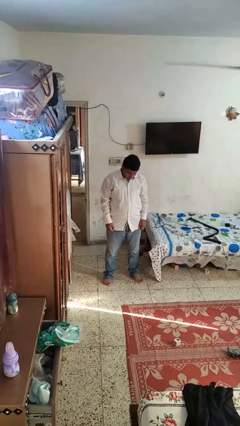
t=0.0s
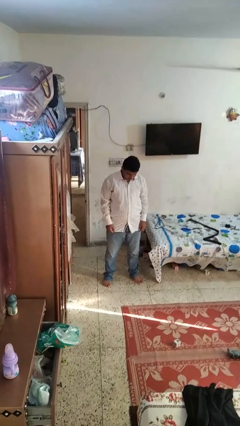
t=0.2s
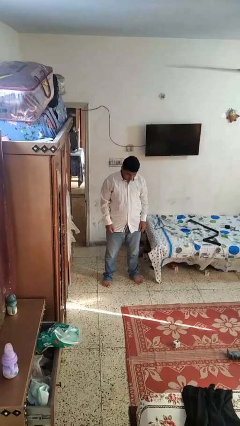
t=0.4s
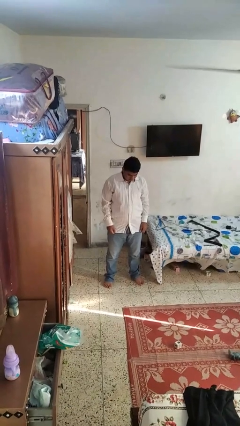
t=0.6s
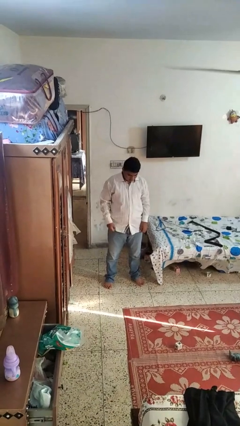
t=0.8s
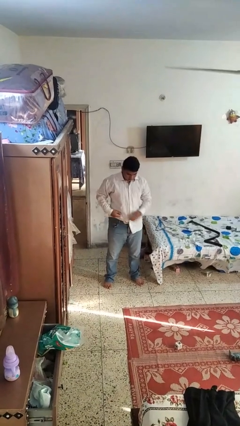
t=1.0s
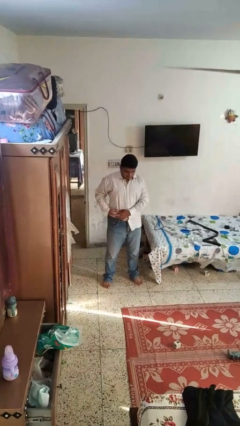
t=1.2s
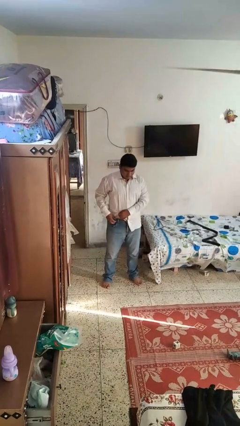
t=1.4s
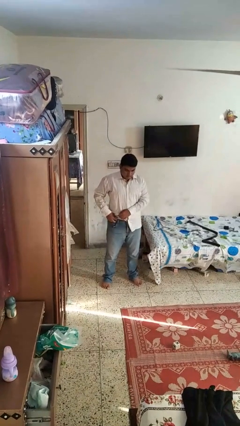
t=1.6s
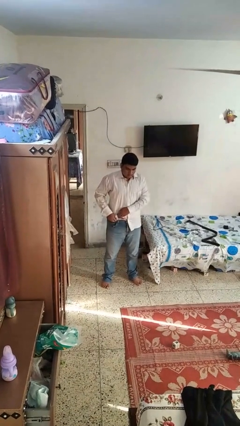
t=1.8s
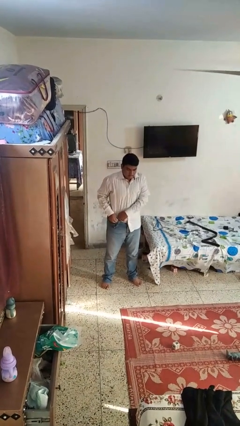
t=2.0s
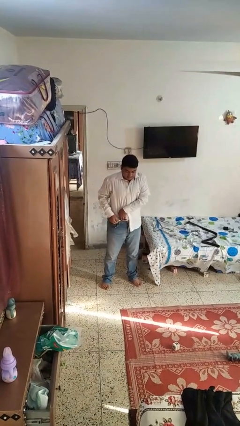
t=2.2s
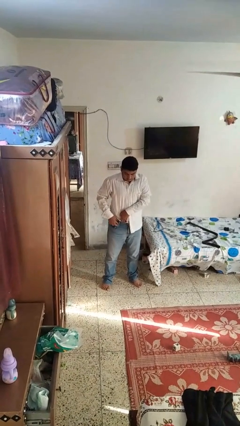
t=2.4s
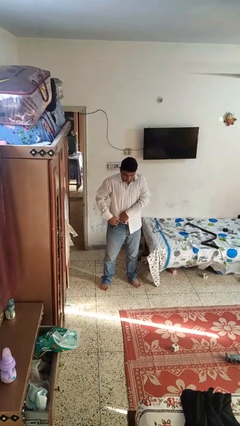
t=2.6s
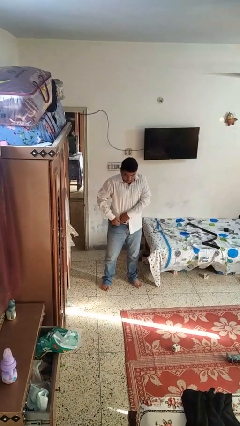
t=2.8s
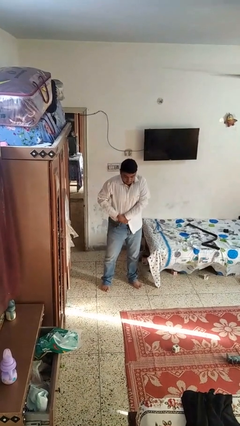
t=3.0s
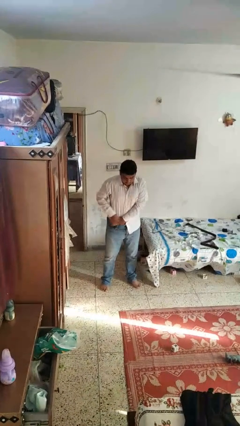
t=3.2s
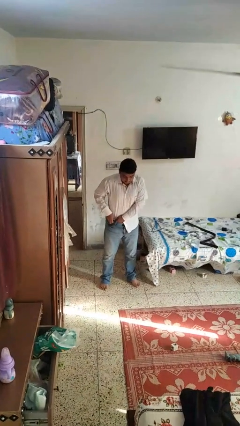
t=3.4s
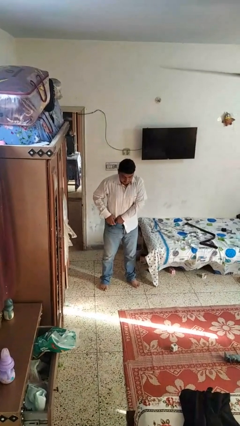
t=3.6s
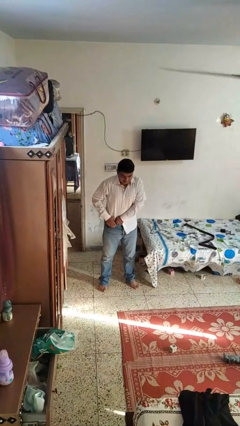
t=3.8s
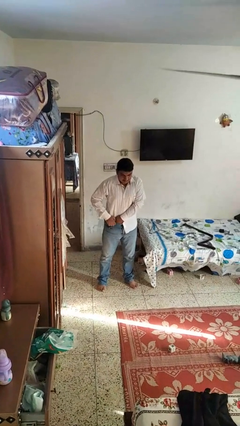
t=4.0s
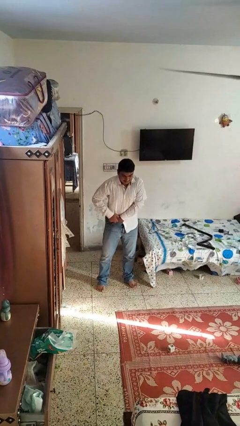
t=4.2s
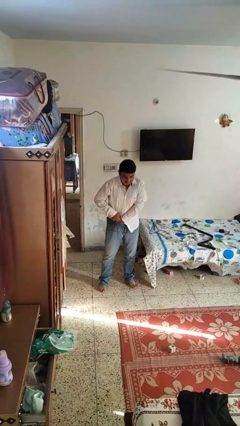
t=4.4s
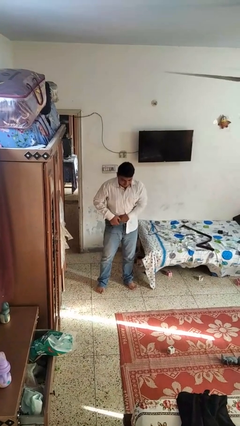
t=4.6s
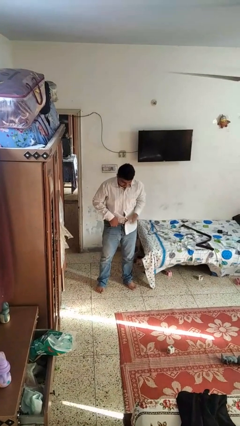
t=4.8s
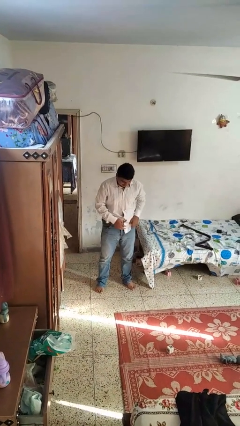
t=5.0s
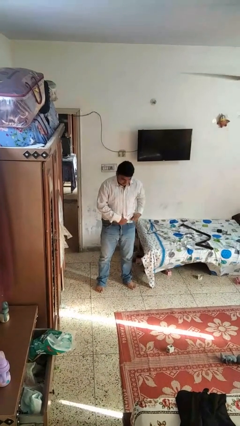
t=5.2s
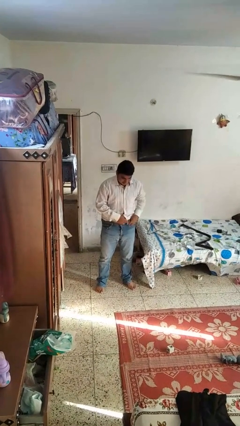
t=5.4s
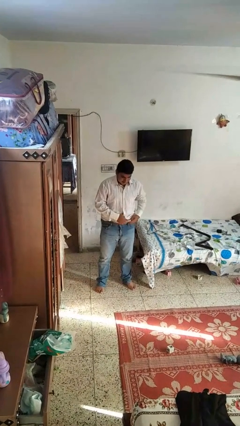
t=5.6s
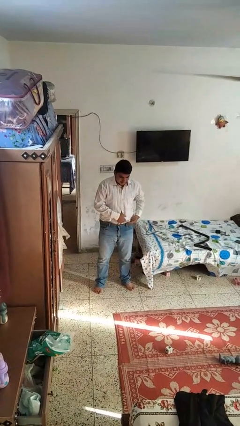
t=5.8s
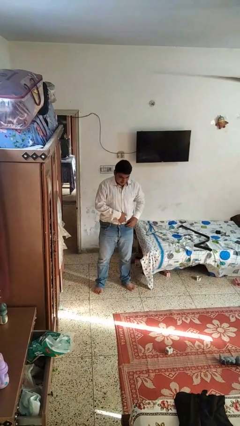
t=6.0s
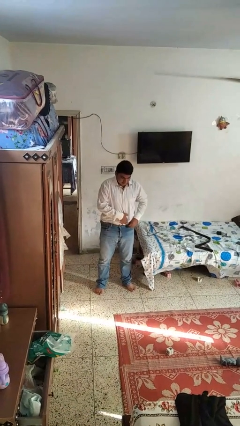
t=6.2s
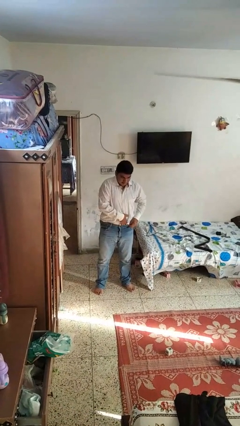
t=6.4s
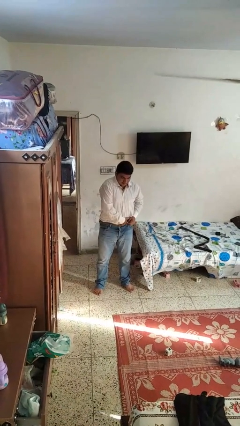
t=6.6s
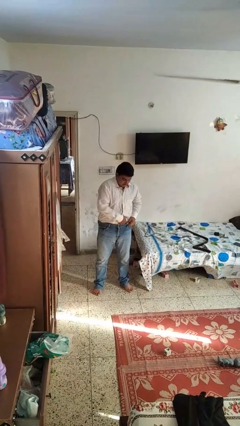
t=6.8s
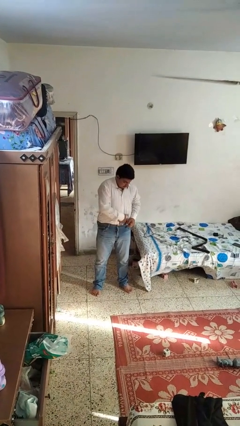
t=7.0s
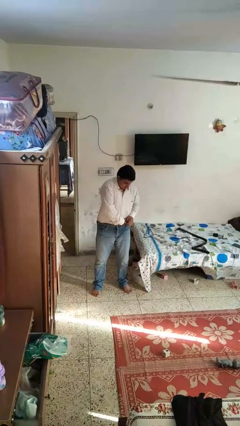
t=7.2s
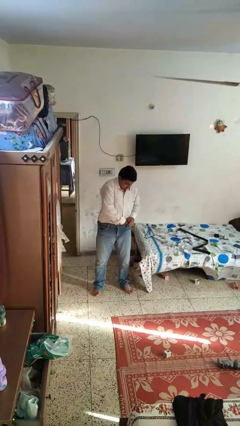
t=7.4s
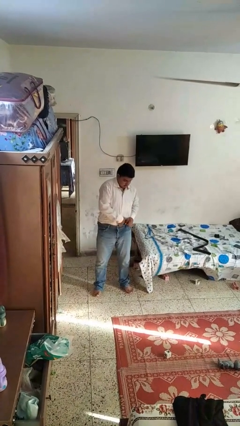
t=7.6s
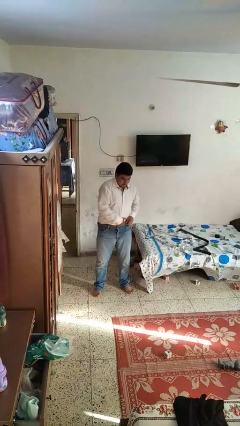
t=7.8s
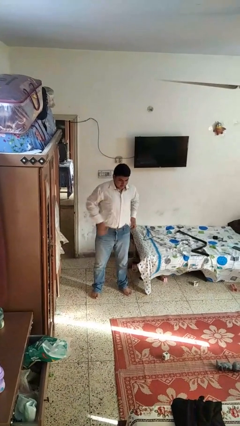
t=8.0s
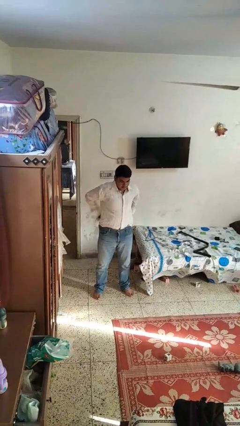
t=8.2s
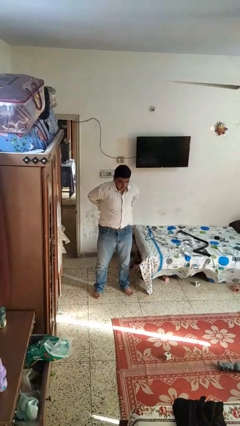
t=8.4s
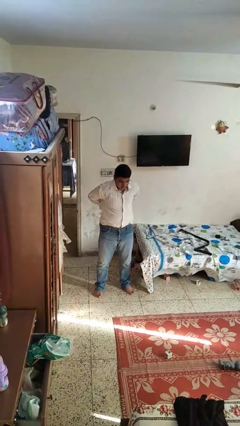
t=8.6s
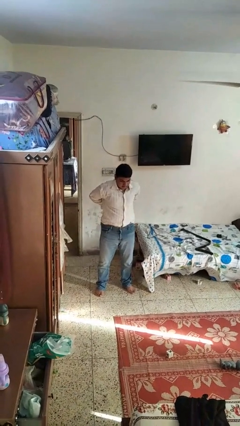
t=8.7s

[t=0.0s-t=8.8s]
person tucks in shirt

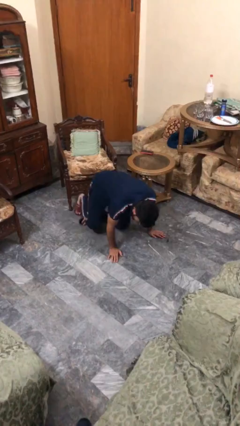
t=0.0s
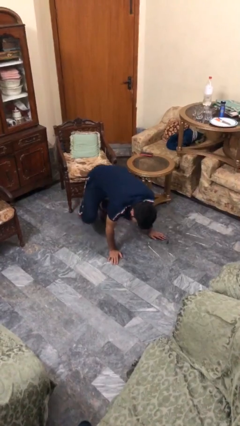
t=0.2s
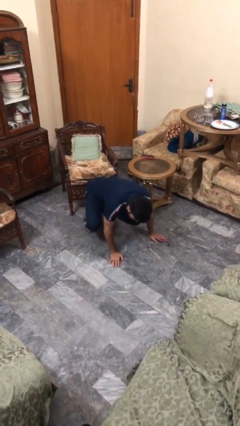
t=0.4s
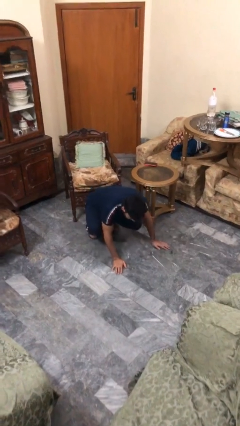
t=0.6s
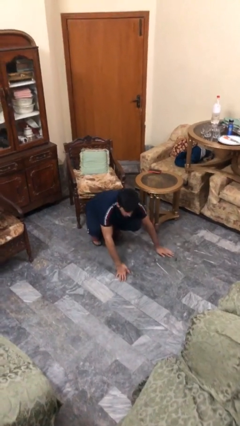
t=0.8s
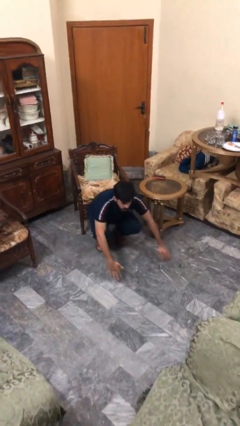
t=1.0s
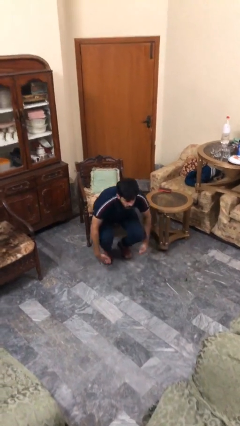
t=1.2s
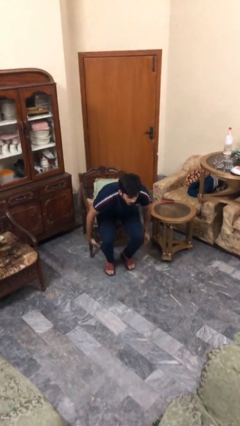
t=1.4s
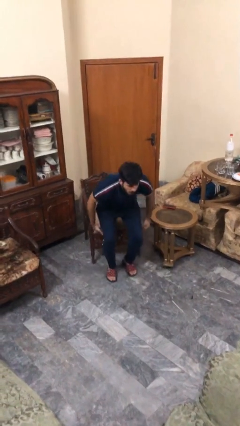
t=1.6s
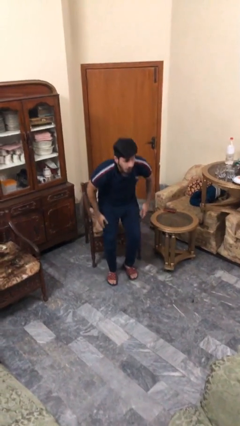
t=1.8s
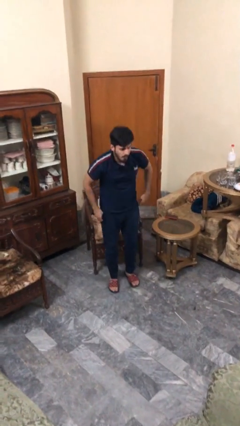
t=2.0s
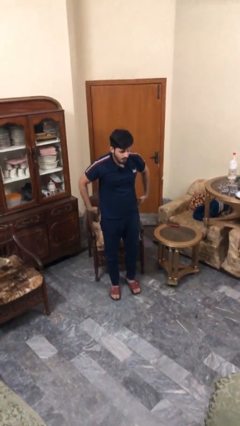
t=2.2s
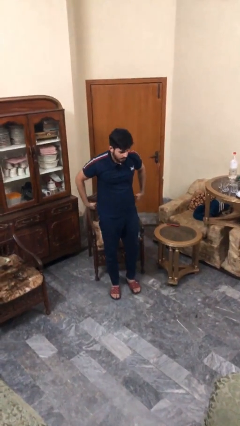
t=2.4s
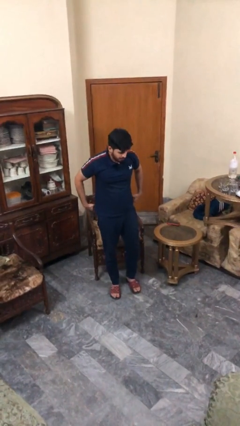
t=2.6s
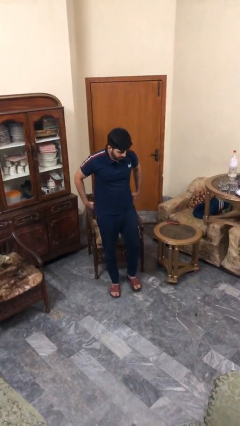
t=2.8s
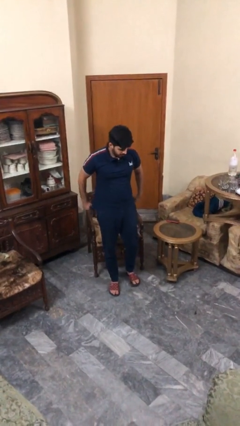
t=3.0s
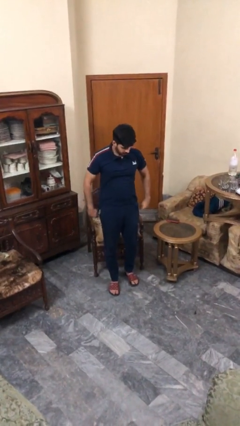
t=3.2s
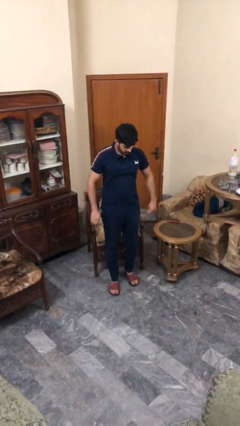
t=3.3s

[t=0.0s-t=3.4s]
person stands up from floor

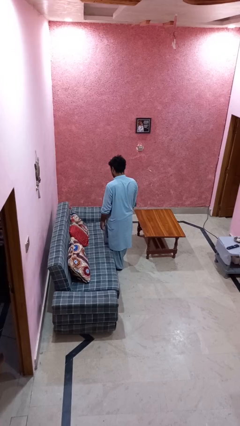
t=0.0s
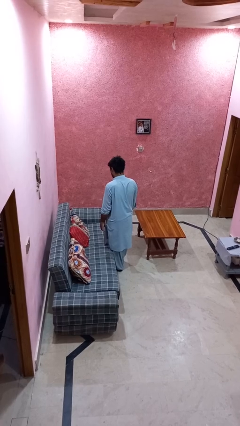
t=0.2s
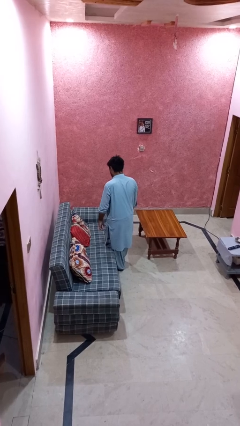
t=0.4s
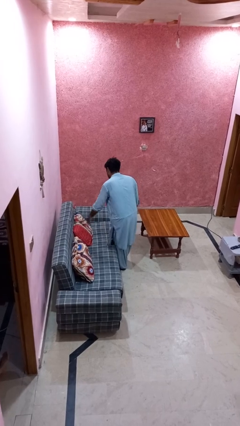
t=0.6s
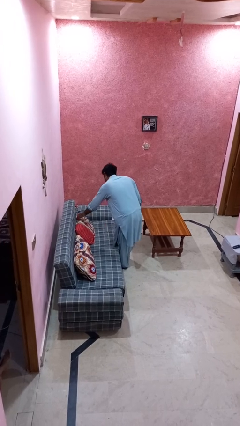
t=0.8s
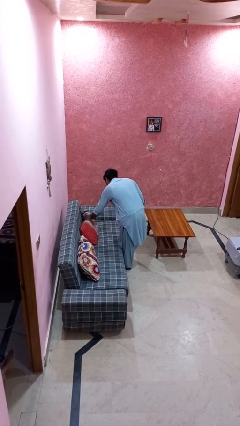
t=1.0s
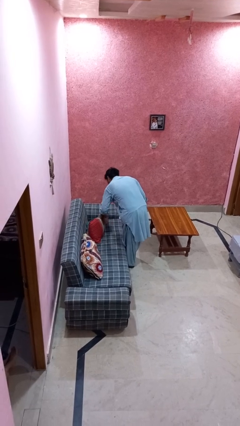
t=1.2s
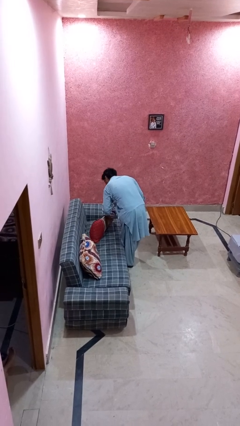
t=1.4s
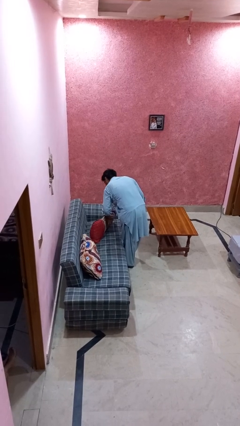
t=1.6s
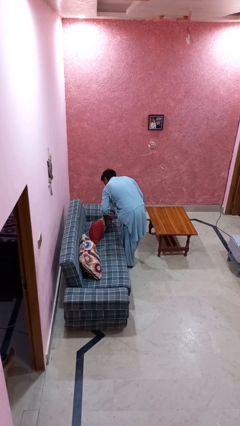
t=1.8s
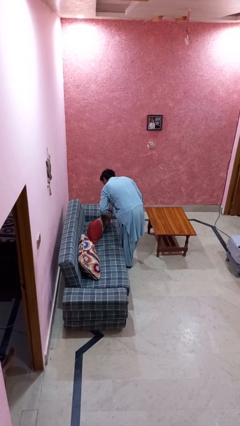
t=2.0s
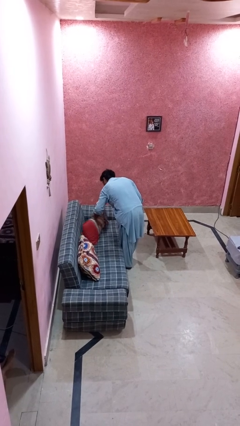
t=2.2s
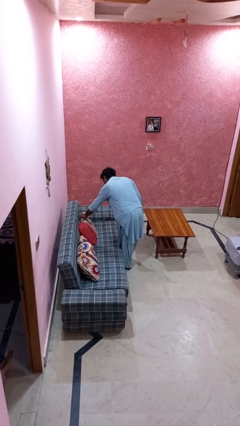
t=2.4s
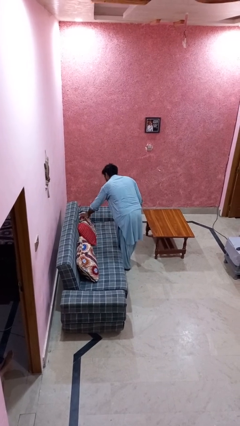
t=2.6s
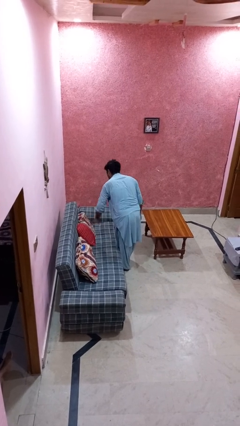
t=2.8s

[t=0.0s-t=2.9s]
person searches in couch

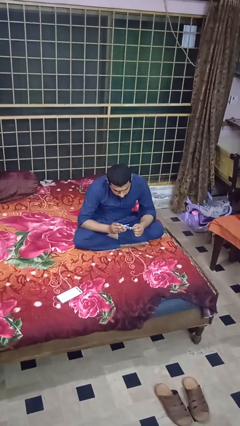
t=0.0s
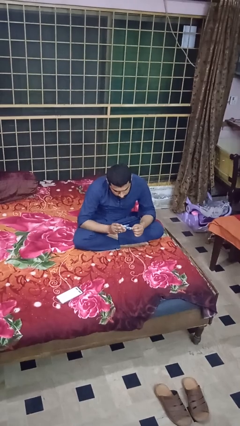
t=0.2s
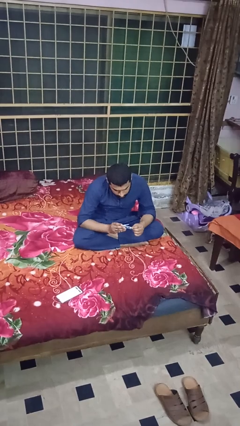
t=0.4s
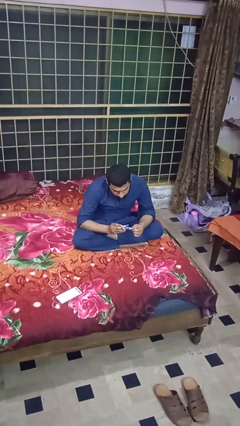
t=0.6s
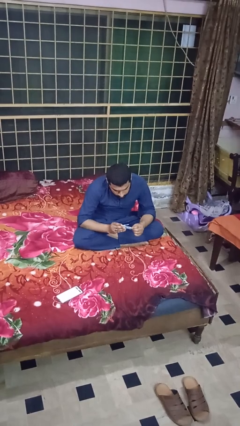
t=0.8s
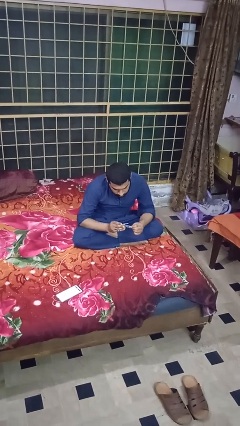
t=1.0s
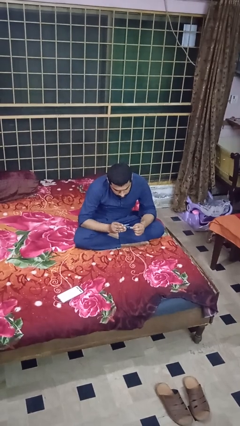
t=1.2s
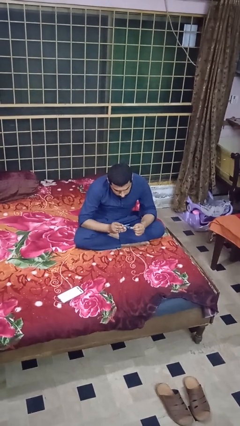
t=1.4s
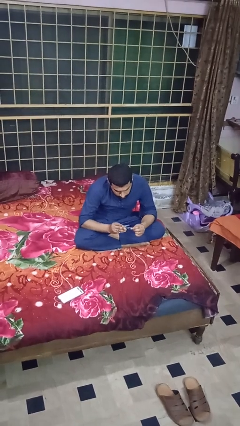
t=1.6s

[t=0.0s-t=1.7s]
person clips fingernails

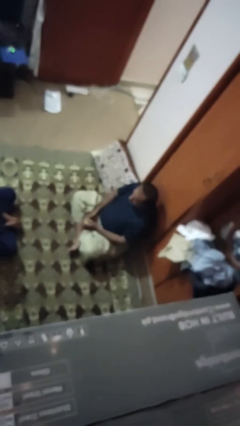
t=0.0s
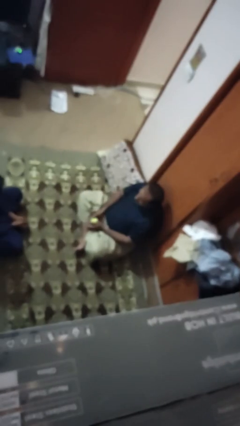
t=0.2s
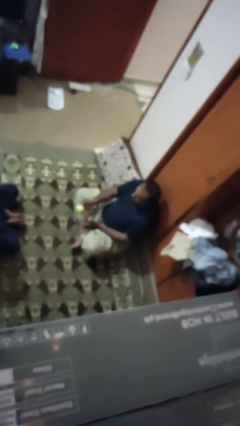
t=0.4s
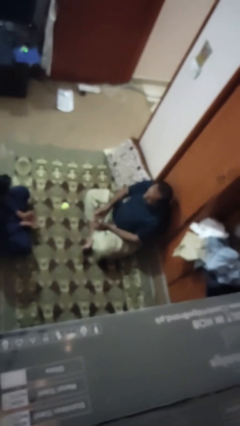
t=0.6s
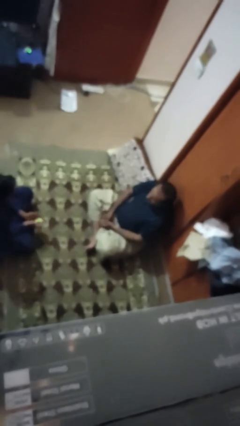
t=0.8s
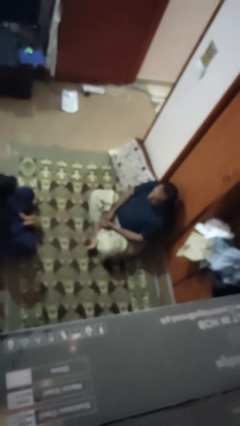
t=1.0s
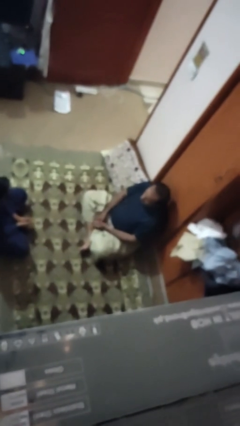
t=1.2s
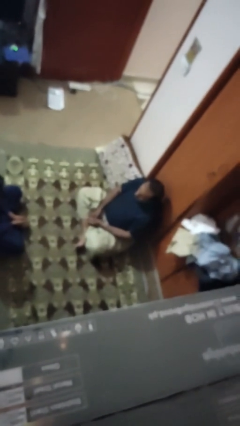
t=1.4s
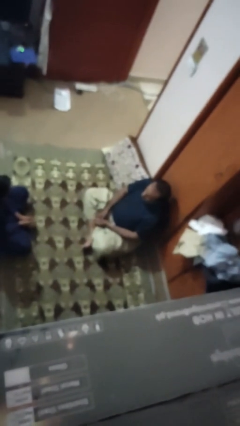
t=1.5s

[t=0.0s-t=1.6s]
person throws object to person
